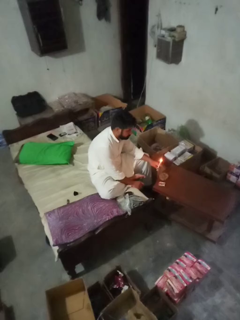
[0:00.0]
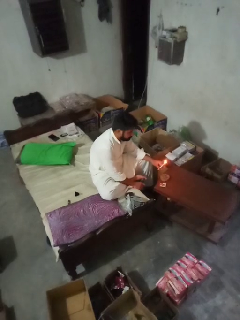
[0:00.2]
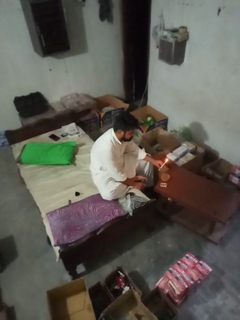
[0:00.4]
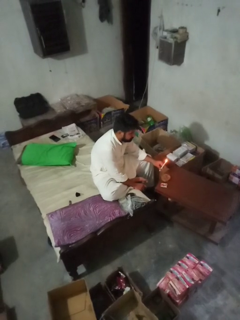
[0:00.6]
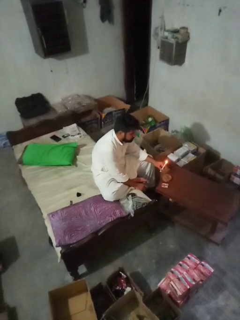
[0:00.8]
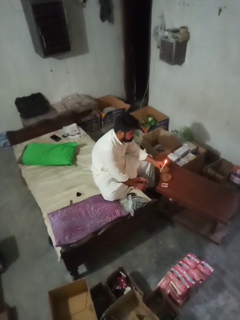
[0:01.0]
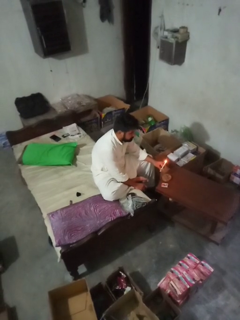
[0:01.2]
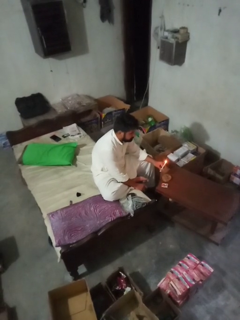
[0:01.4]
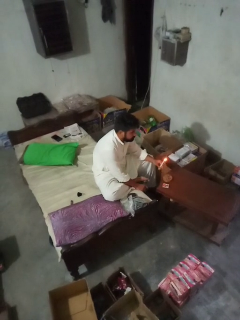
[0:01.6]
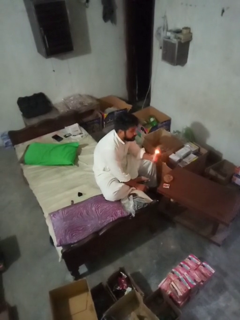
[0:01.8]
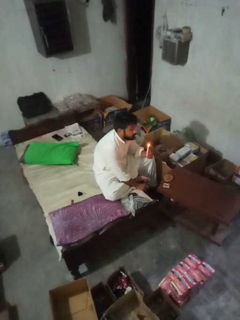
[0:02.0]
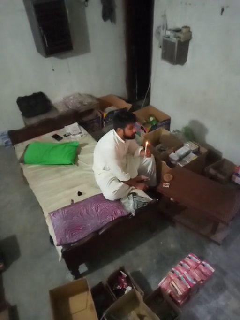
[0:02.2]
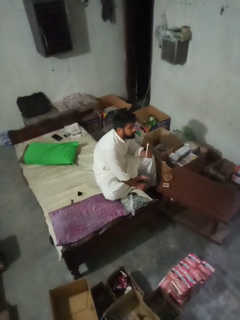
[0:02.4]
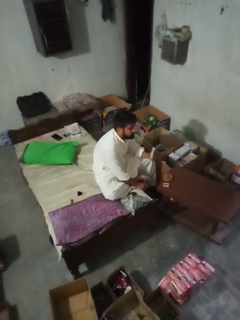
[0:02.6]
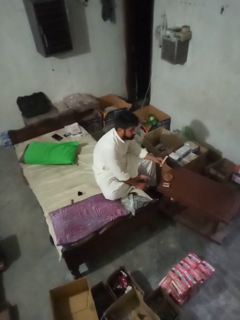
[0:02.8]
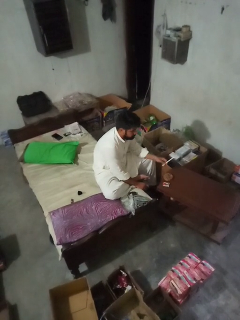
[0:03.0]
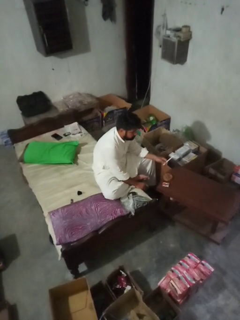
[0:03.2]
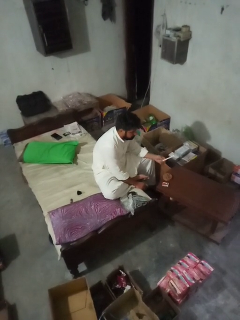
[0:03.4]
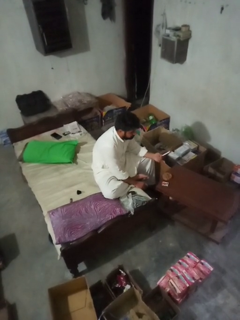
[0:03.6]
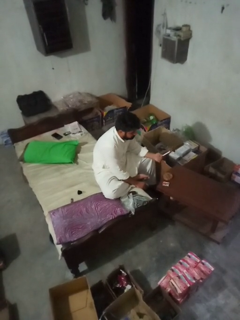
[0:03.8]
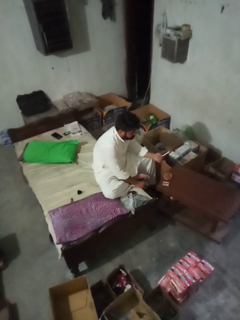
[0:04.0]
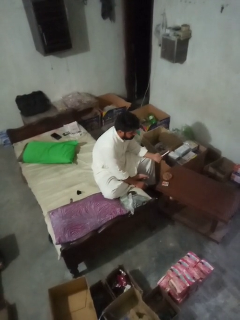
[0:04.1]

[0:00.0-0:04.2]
person extinguishes candle

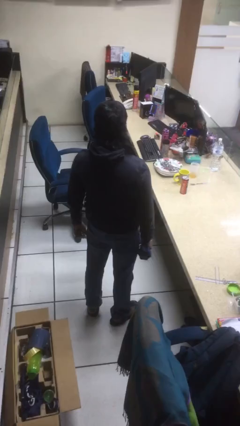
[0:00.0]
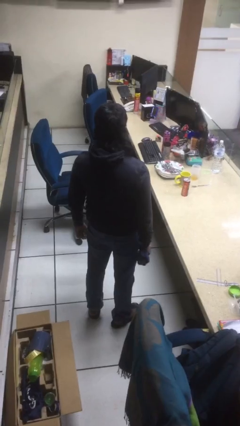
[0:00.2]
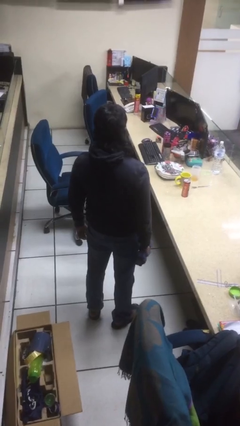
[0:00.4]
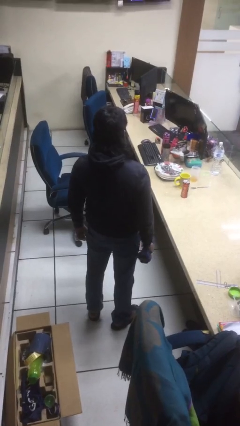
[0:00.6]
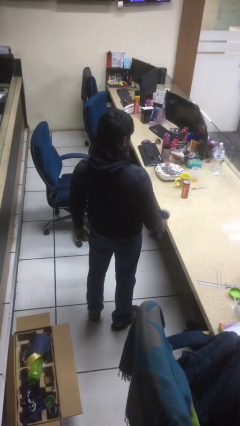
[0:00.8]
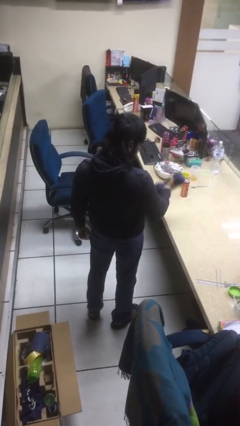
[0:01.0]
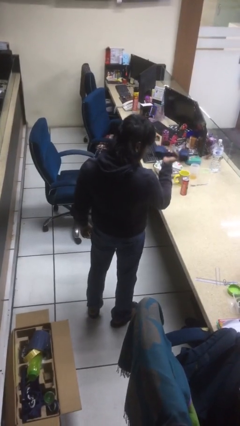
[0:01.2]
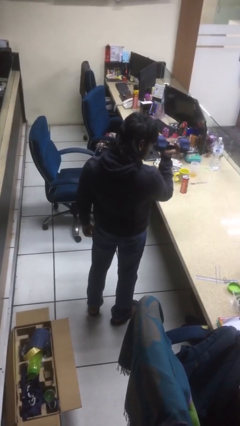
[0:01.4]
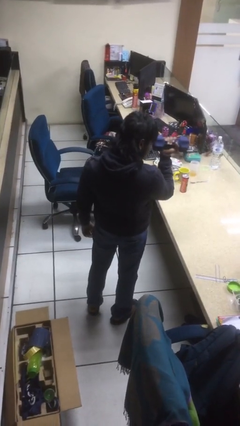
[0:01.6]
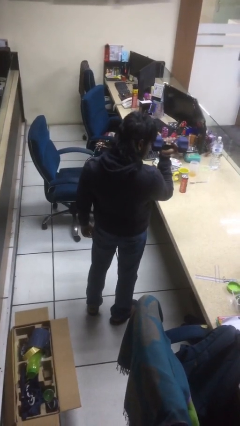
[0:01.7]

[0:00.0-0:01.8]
person lifts dumbbells

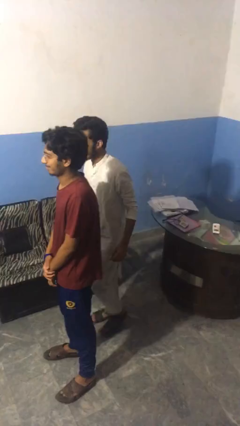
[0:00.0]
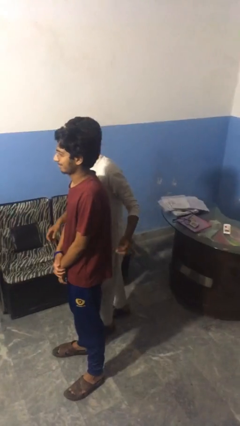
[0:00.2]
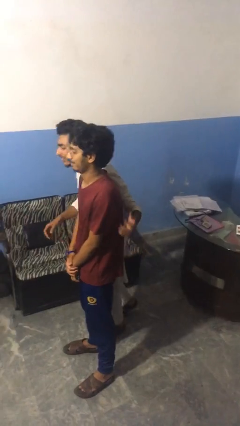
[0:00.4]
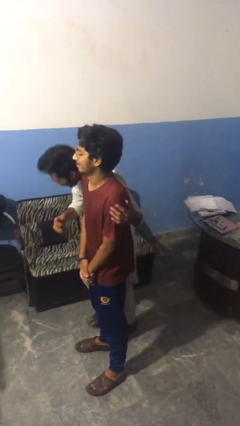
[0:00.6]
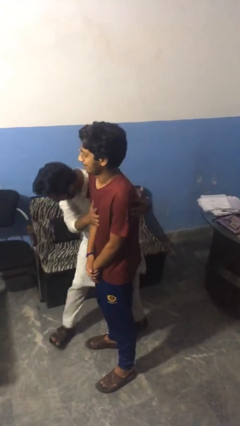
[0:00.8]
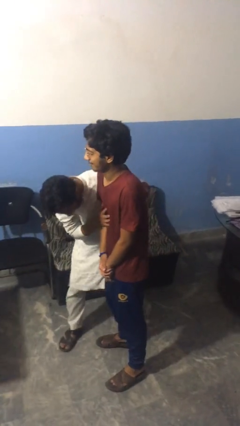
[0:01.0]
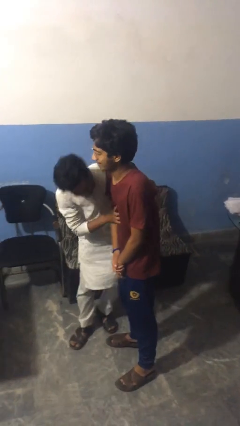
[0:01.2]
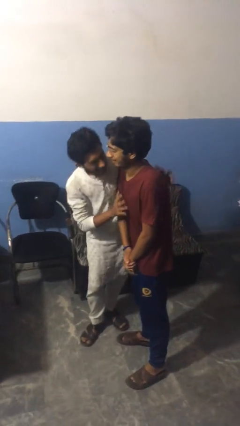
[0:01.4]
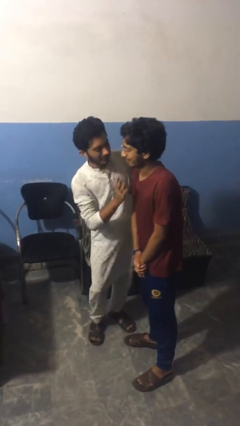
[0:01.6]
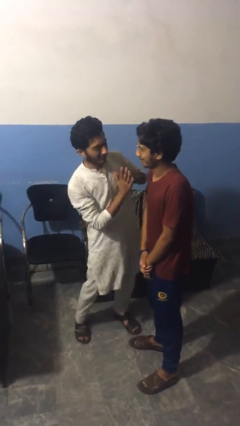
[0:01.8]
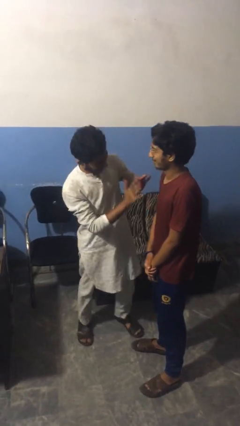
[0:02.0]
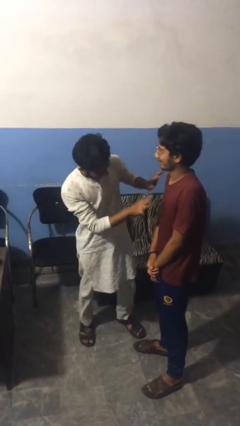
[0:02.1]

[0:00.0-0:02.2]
person bumps into person

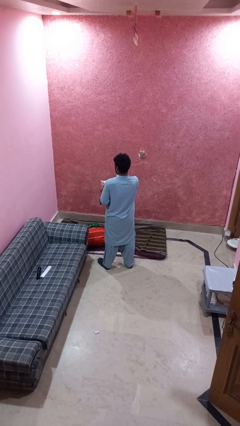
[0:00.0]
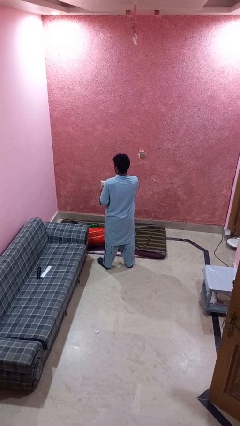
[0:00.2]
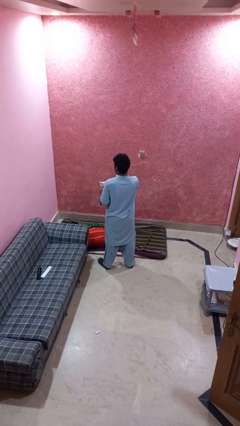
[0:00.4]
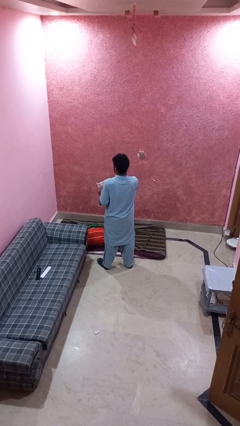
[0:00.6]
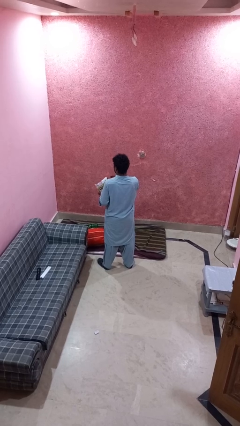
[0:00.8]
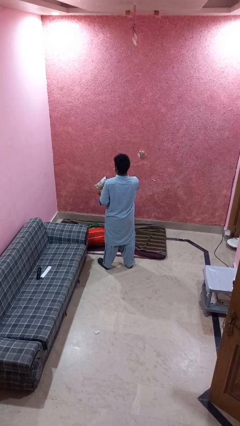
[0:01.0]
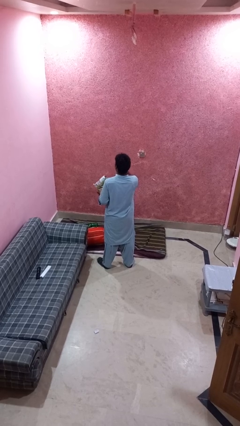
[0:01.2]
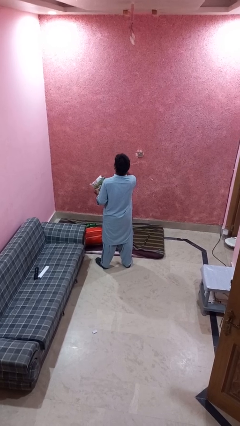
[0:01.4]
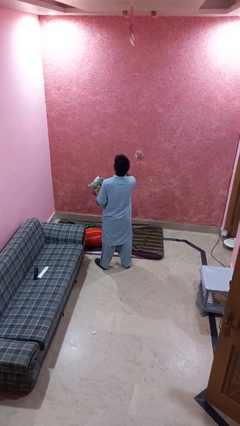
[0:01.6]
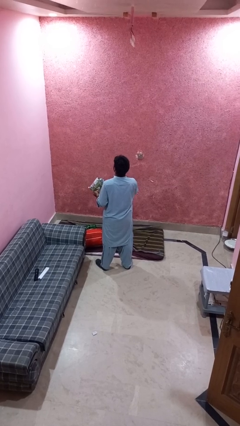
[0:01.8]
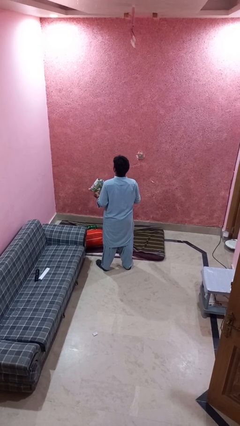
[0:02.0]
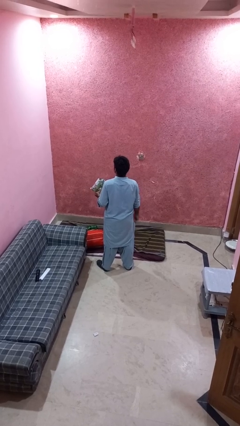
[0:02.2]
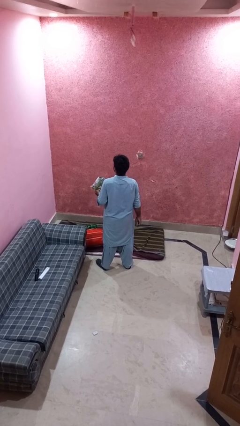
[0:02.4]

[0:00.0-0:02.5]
person eats snack from bag

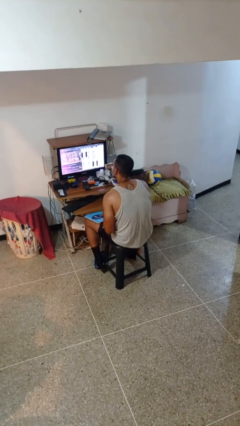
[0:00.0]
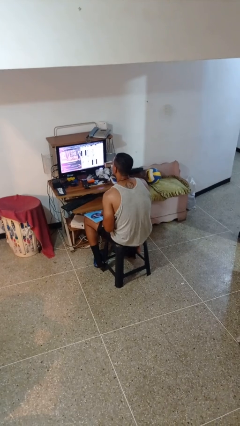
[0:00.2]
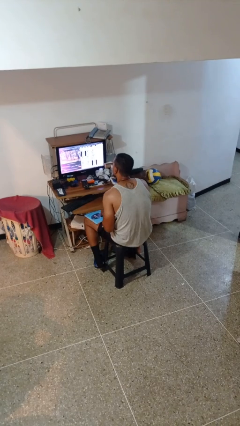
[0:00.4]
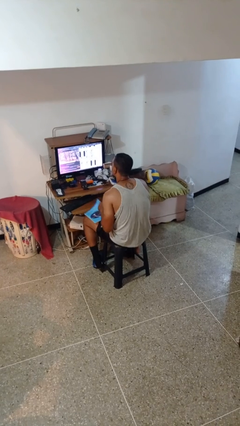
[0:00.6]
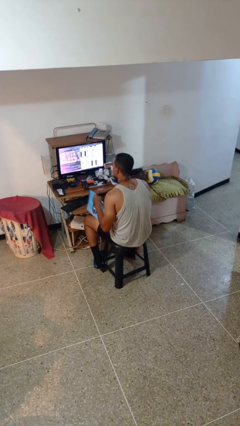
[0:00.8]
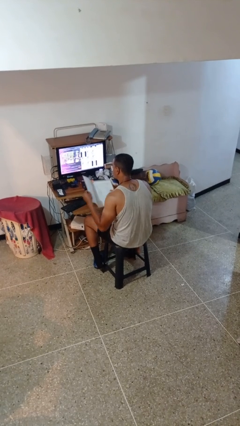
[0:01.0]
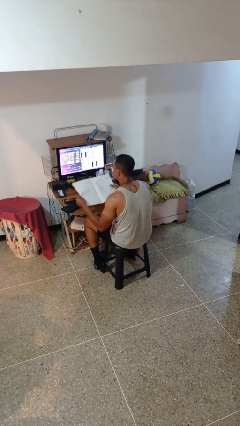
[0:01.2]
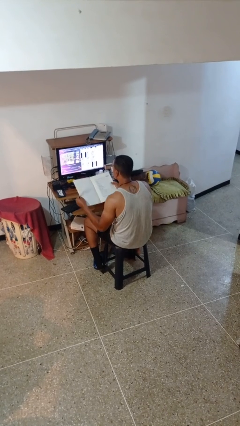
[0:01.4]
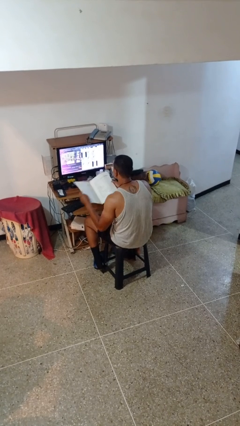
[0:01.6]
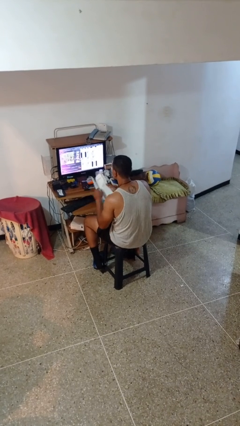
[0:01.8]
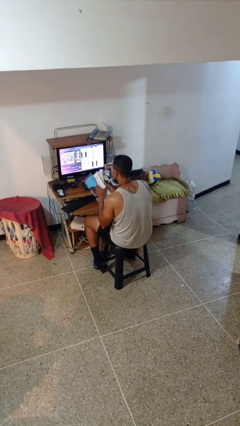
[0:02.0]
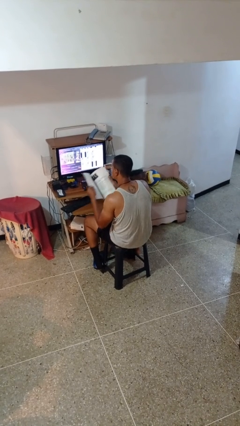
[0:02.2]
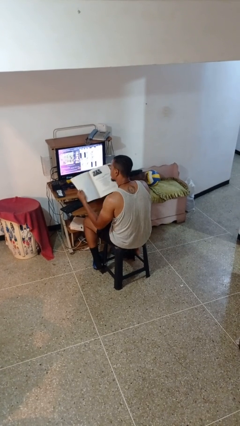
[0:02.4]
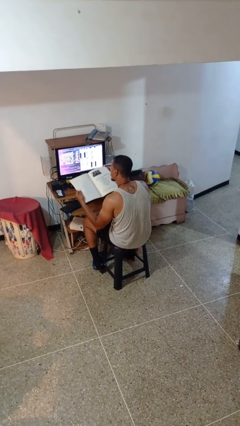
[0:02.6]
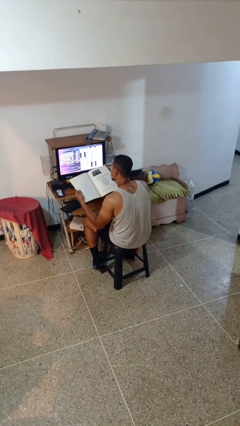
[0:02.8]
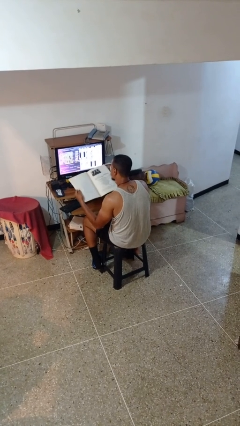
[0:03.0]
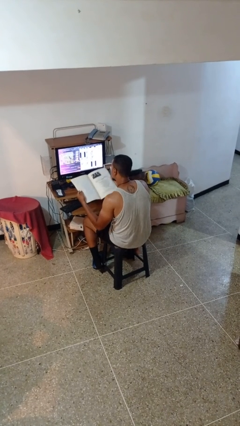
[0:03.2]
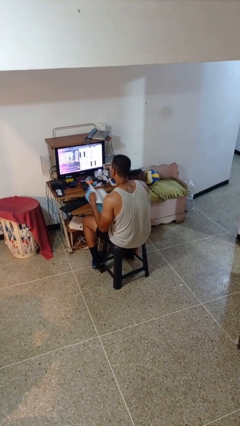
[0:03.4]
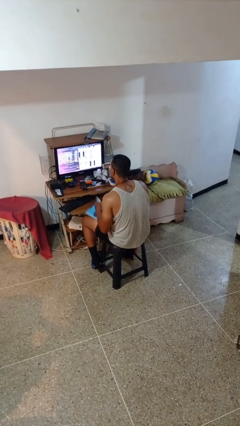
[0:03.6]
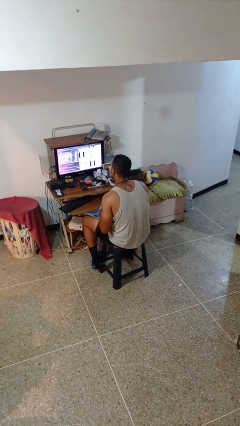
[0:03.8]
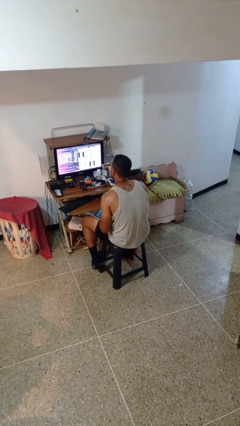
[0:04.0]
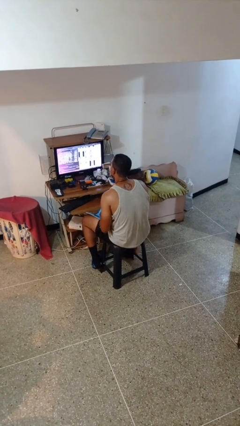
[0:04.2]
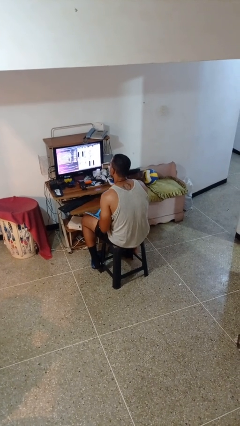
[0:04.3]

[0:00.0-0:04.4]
person reads magazine

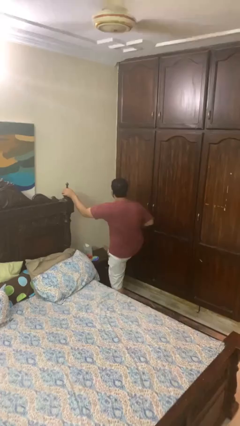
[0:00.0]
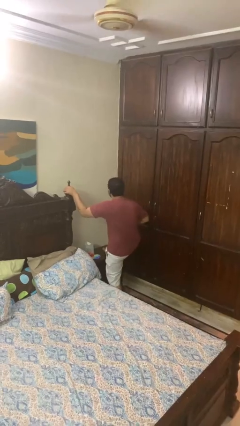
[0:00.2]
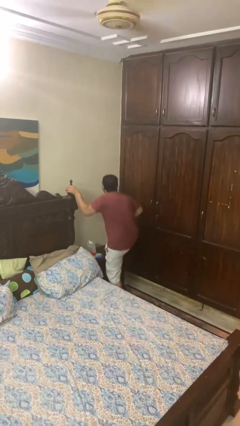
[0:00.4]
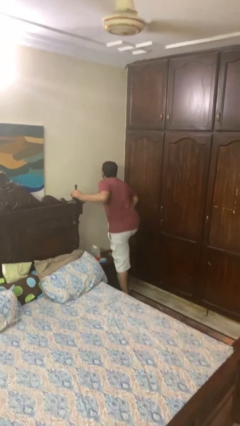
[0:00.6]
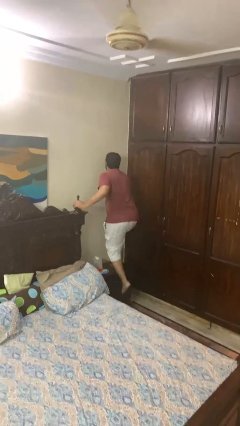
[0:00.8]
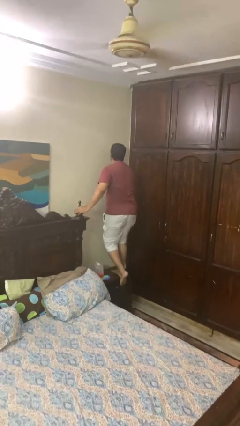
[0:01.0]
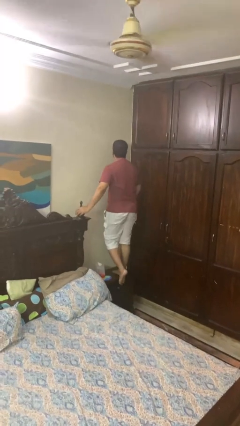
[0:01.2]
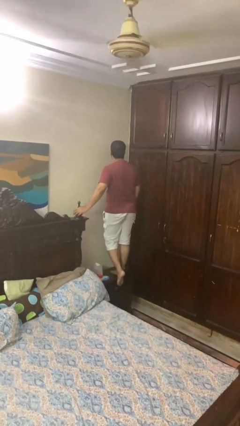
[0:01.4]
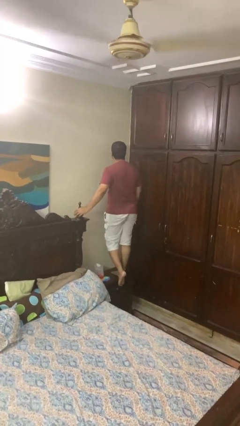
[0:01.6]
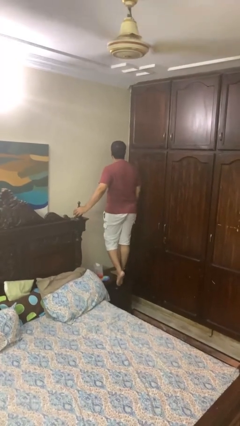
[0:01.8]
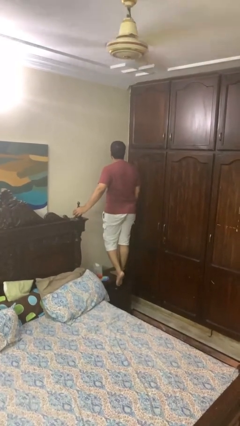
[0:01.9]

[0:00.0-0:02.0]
person climbs on table

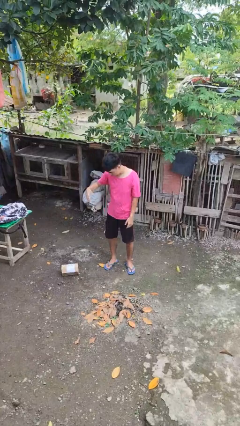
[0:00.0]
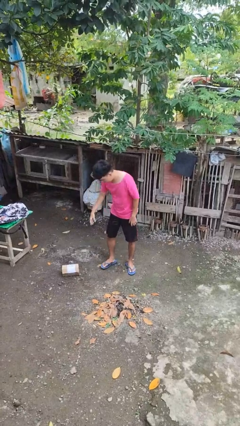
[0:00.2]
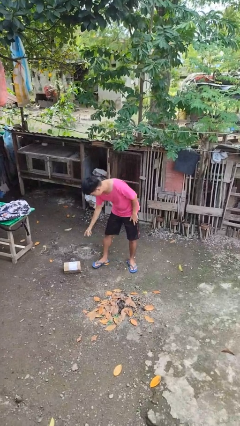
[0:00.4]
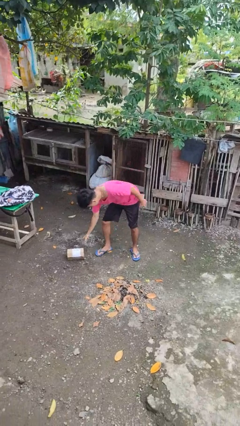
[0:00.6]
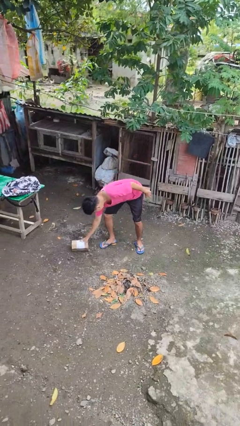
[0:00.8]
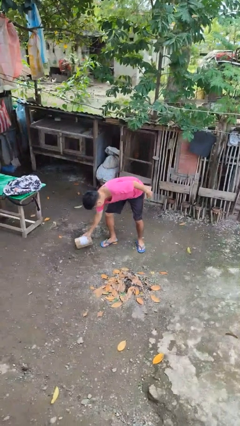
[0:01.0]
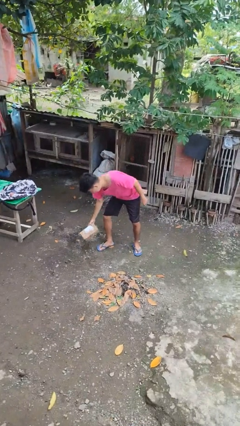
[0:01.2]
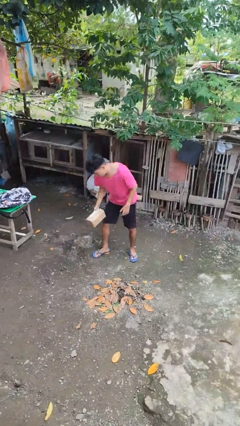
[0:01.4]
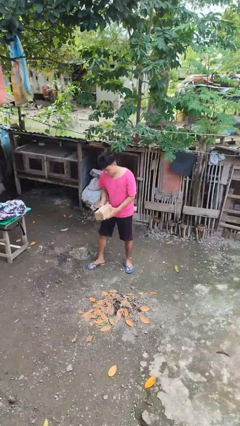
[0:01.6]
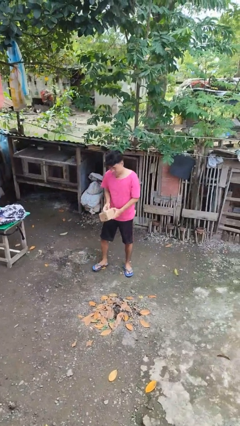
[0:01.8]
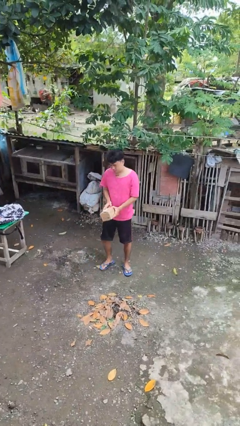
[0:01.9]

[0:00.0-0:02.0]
person picks up object from floor
